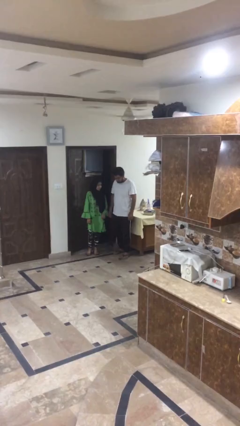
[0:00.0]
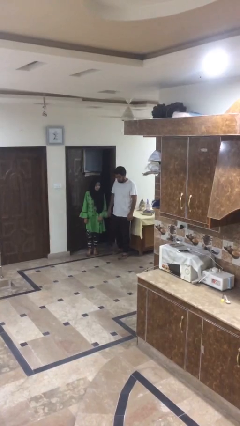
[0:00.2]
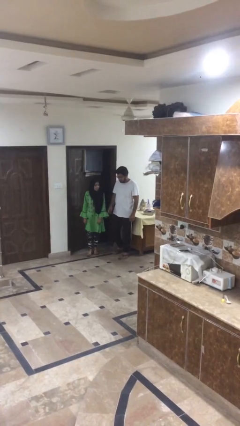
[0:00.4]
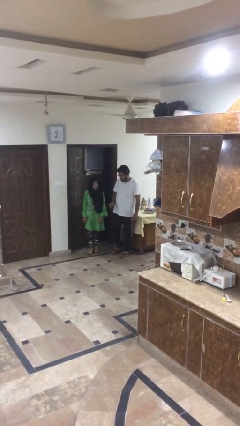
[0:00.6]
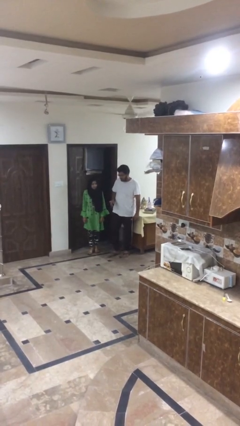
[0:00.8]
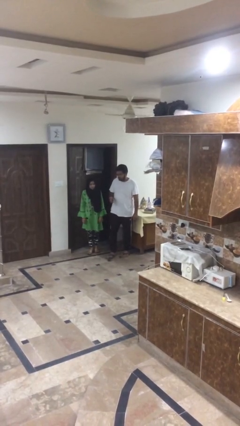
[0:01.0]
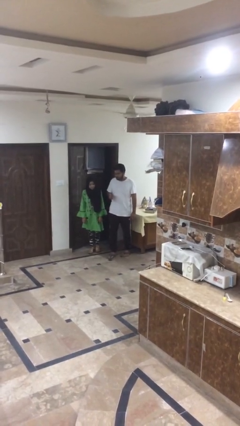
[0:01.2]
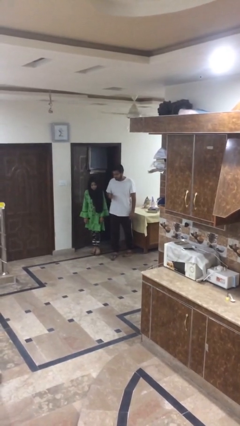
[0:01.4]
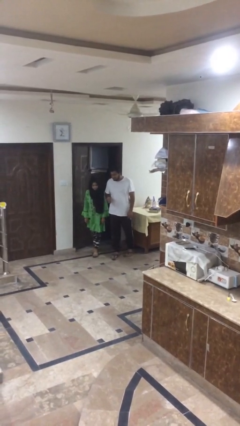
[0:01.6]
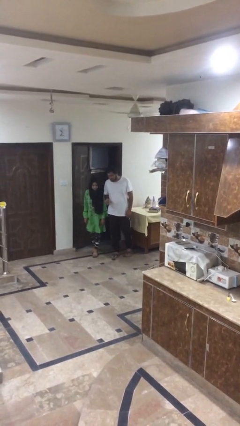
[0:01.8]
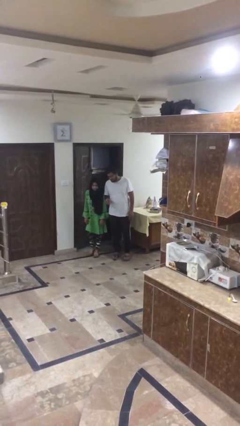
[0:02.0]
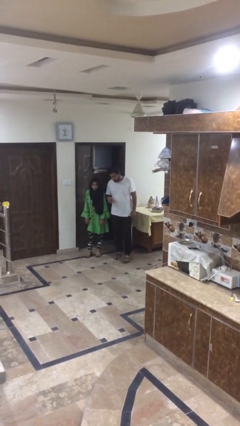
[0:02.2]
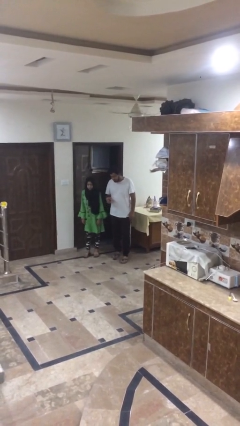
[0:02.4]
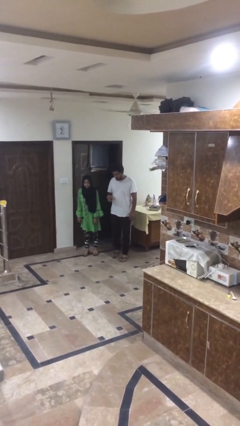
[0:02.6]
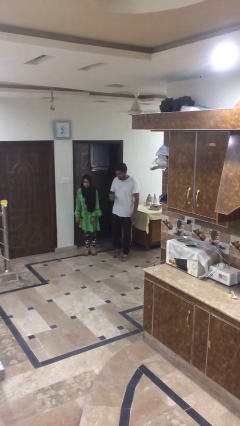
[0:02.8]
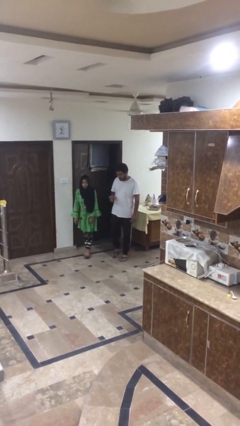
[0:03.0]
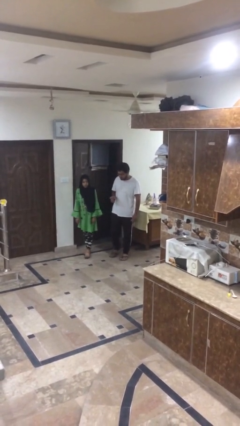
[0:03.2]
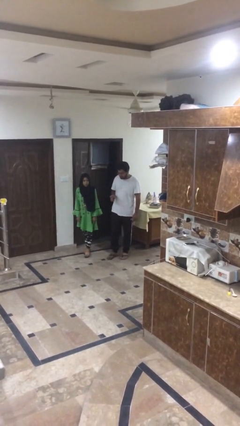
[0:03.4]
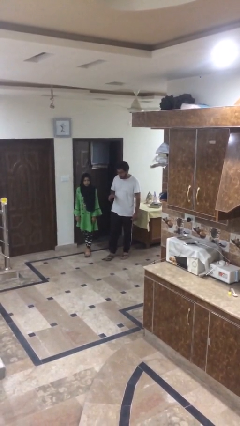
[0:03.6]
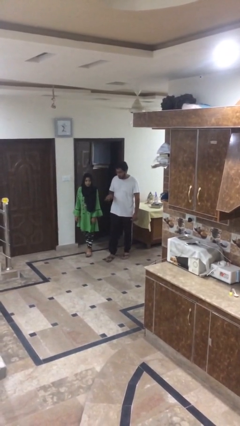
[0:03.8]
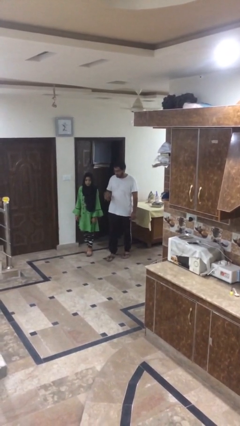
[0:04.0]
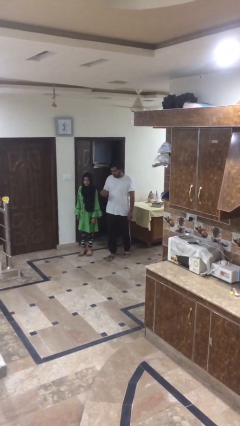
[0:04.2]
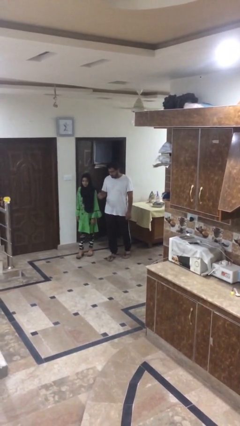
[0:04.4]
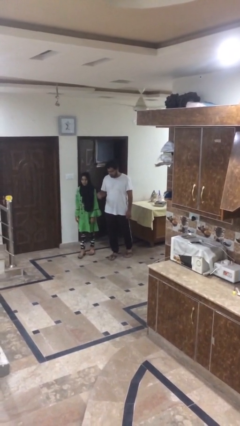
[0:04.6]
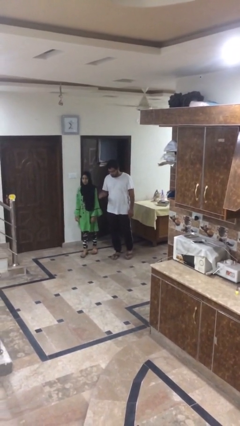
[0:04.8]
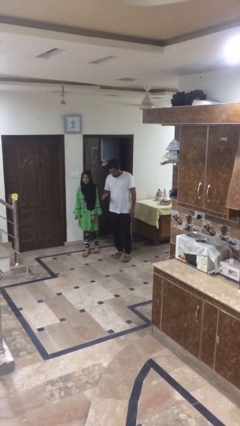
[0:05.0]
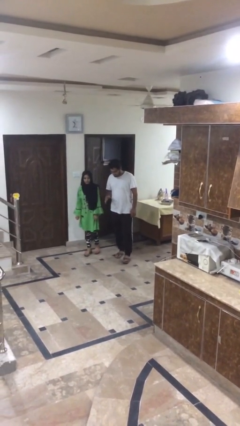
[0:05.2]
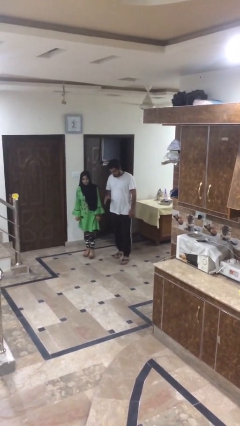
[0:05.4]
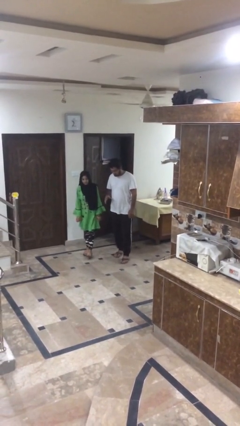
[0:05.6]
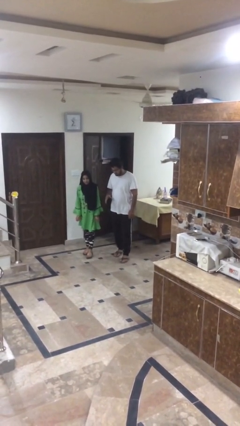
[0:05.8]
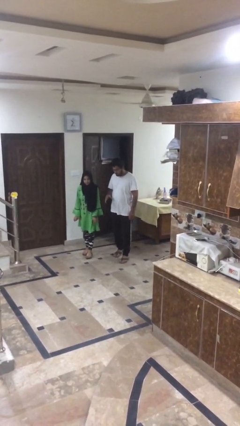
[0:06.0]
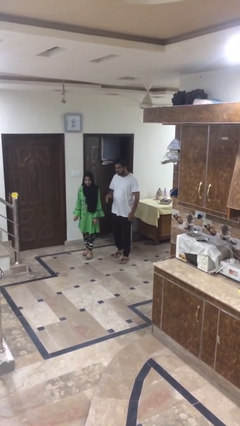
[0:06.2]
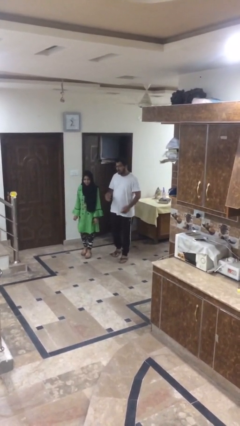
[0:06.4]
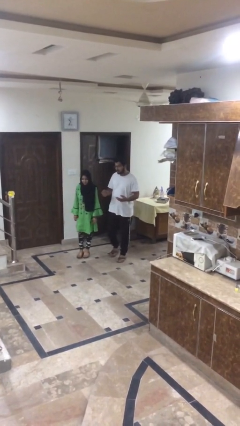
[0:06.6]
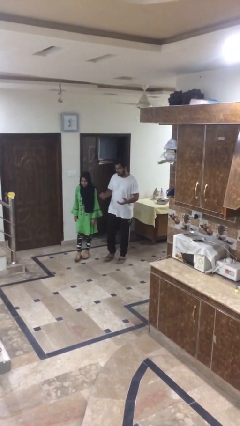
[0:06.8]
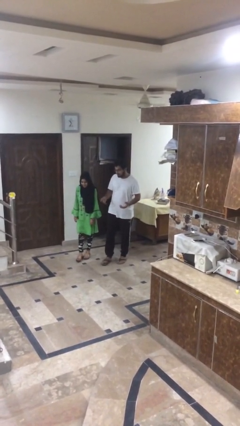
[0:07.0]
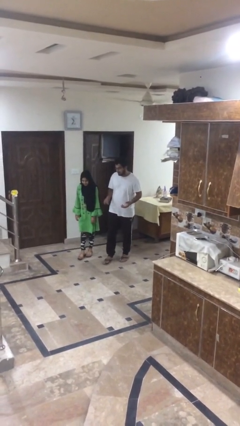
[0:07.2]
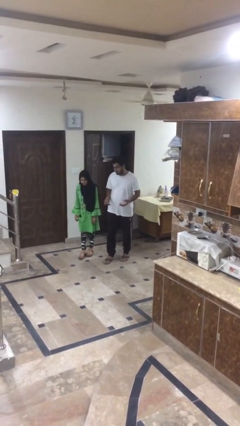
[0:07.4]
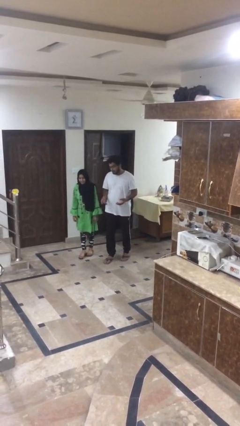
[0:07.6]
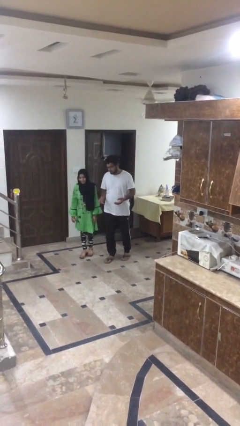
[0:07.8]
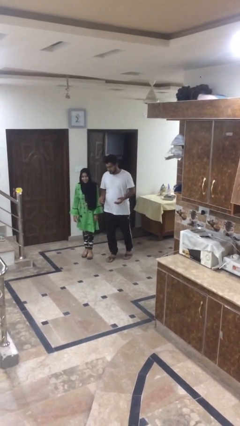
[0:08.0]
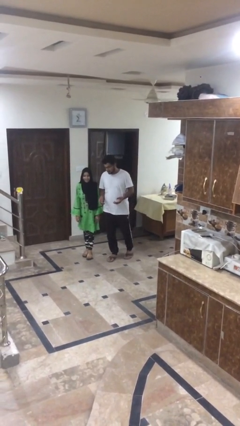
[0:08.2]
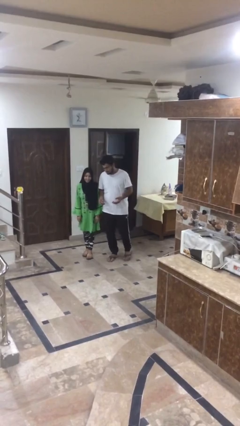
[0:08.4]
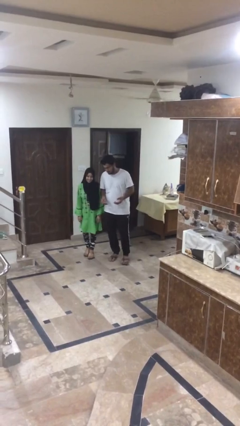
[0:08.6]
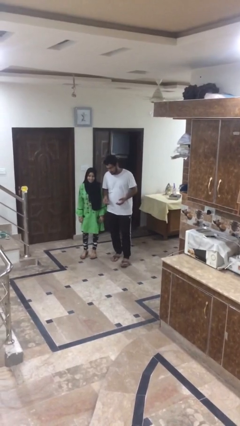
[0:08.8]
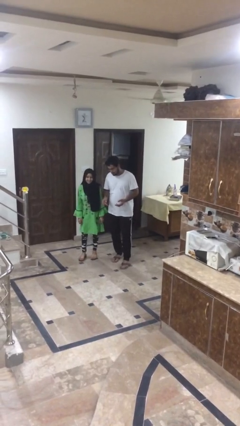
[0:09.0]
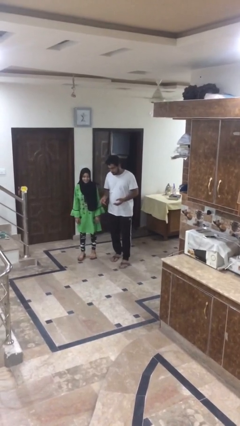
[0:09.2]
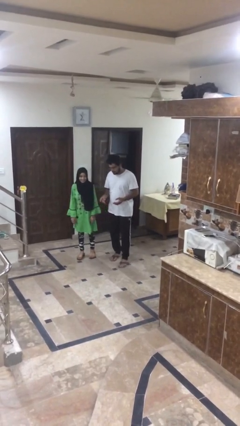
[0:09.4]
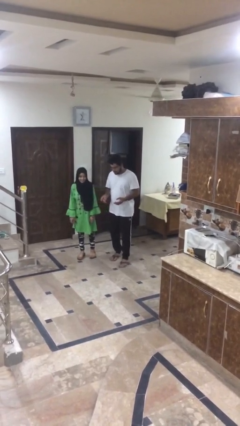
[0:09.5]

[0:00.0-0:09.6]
person talks to person

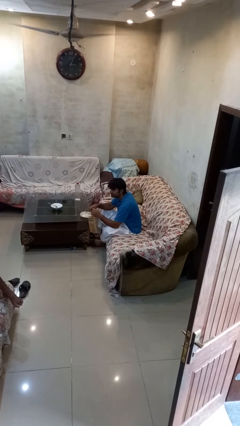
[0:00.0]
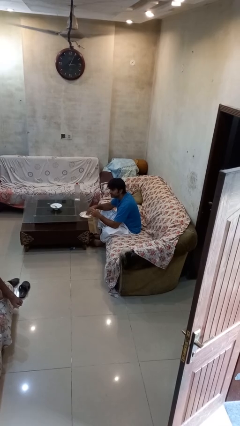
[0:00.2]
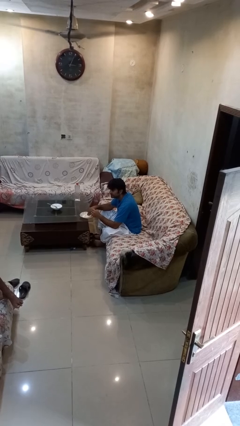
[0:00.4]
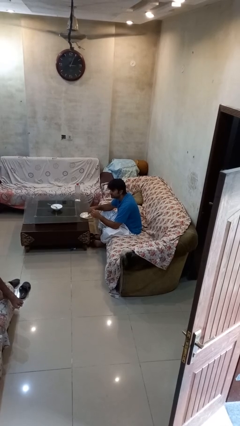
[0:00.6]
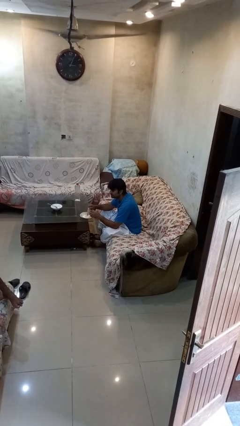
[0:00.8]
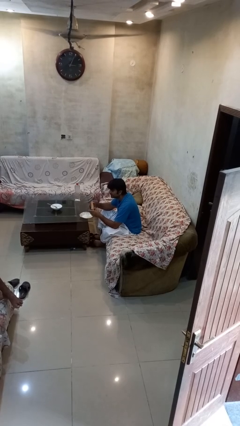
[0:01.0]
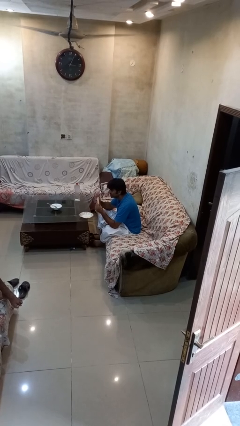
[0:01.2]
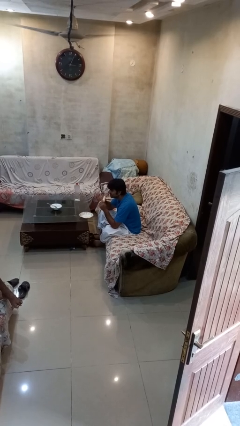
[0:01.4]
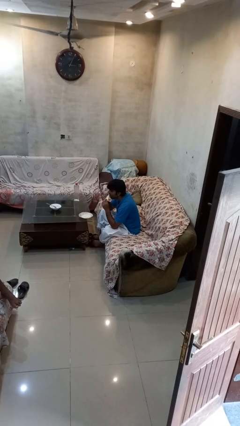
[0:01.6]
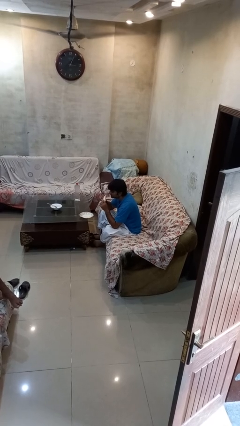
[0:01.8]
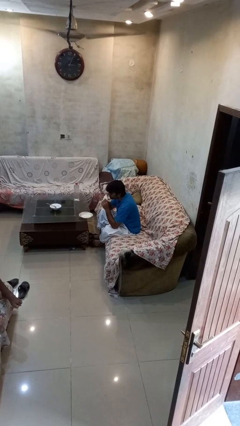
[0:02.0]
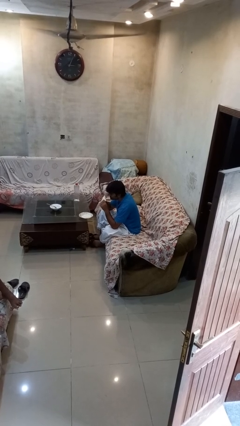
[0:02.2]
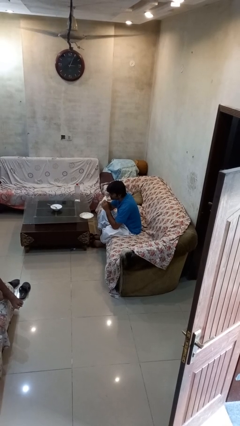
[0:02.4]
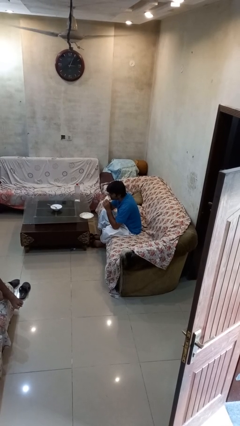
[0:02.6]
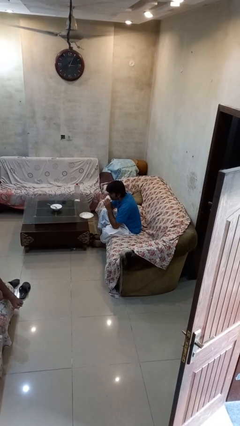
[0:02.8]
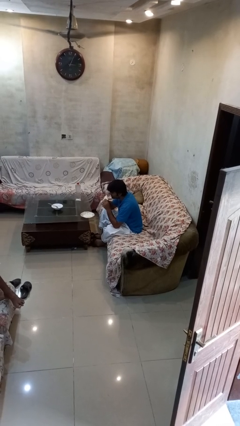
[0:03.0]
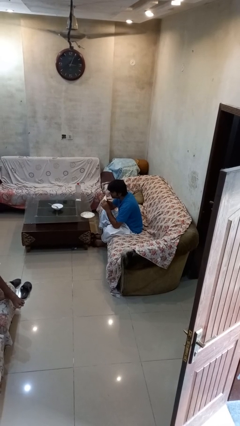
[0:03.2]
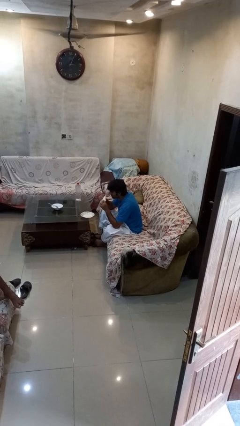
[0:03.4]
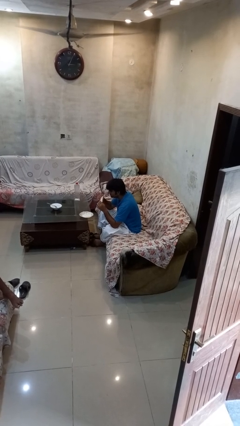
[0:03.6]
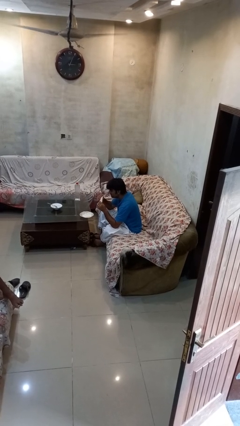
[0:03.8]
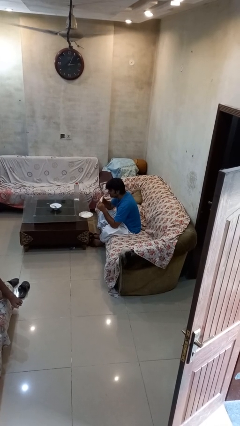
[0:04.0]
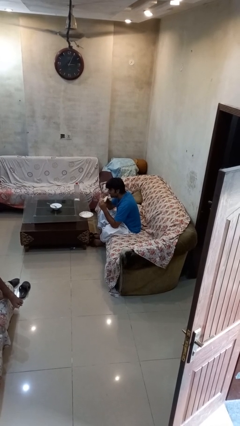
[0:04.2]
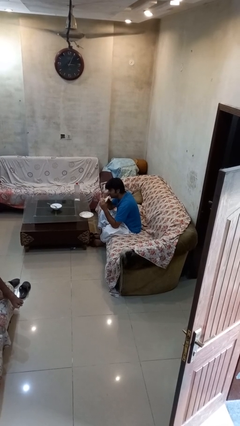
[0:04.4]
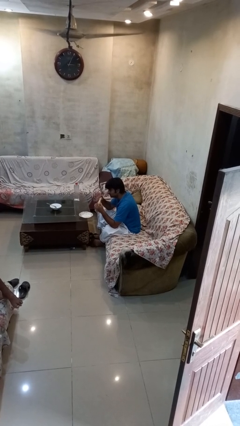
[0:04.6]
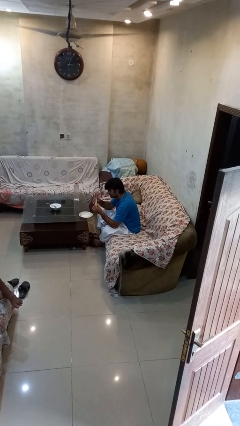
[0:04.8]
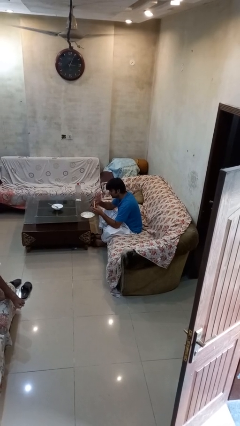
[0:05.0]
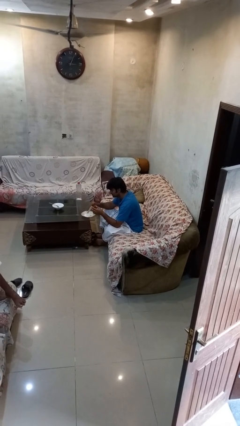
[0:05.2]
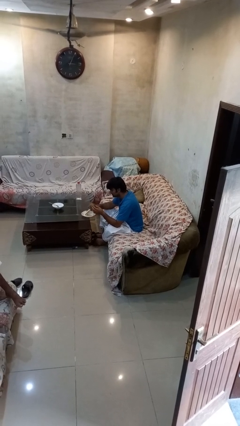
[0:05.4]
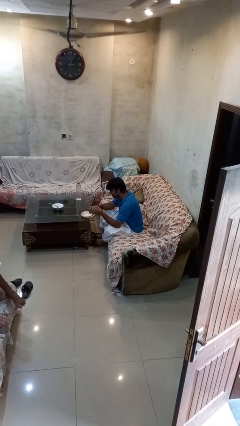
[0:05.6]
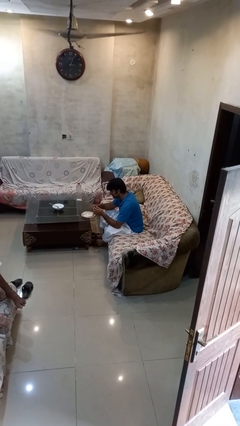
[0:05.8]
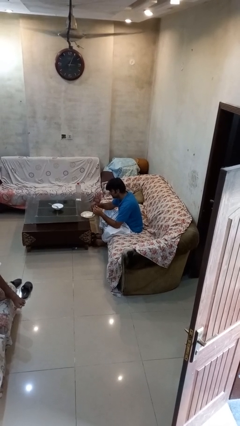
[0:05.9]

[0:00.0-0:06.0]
person eats with hands

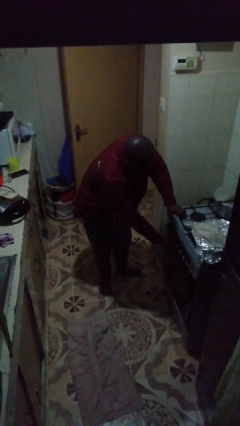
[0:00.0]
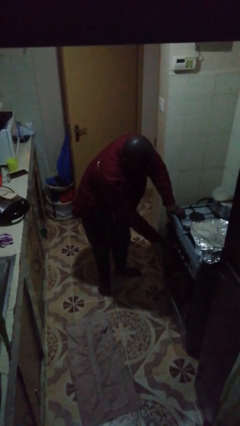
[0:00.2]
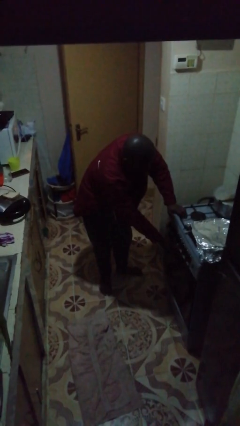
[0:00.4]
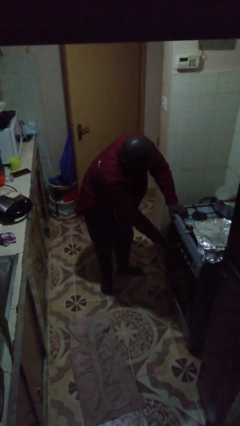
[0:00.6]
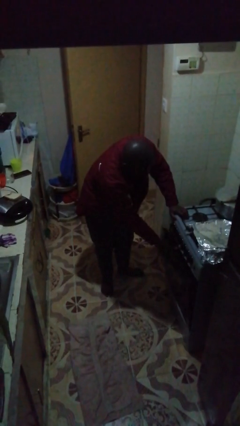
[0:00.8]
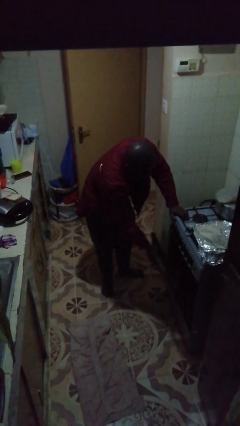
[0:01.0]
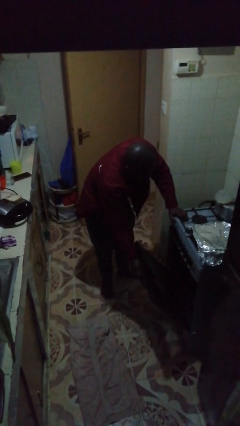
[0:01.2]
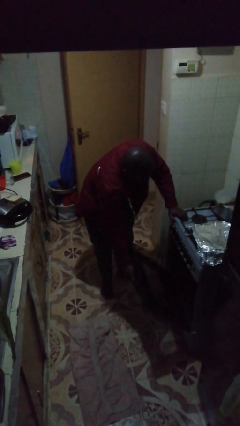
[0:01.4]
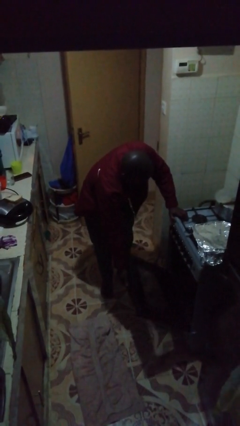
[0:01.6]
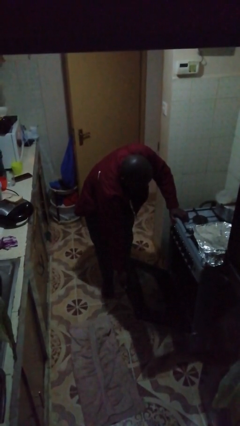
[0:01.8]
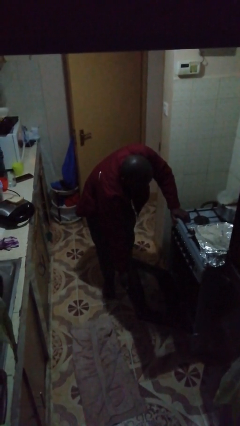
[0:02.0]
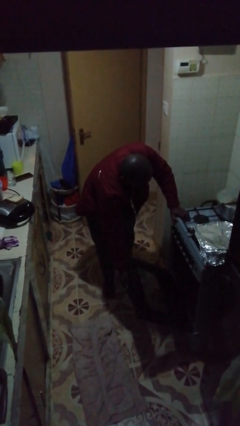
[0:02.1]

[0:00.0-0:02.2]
person opens oven door
